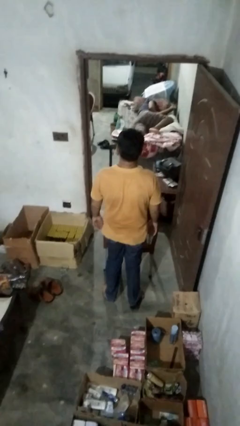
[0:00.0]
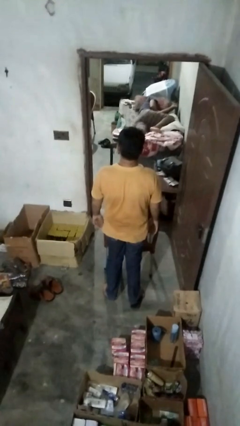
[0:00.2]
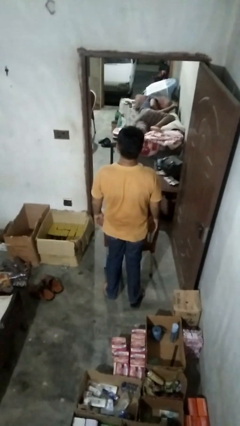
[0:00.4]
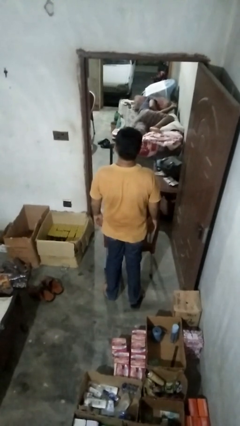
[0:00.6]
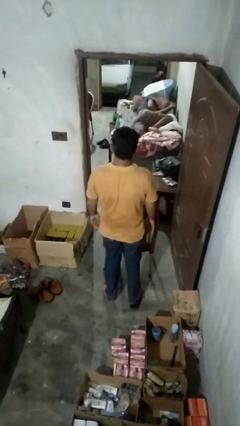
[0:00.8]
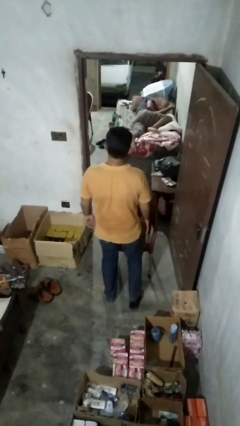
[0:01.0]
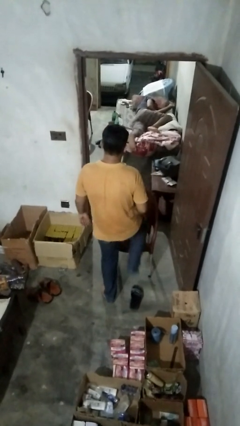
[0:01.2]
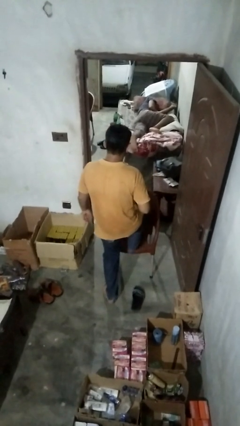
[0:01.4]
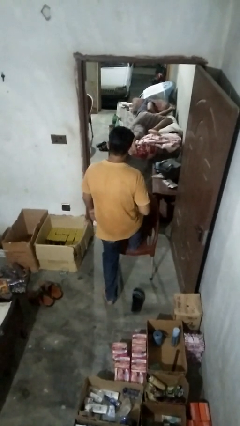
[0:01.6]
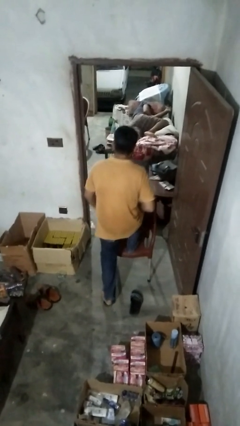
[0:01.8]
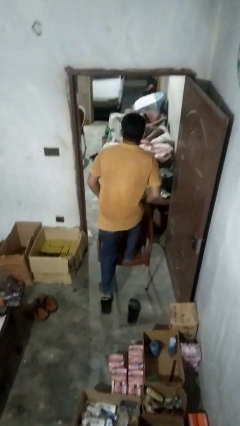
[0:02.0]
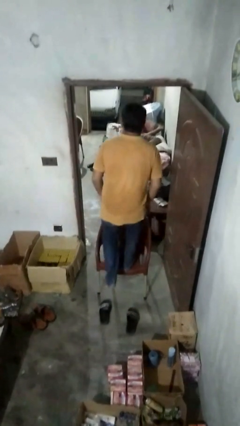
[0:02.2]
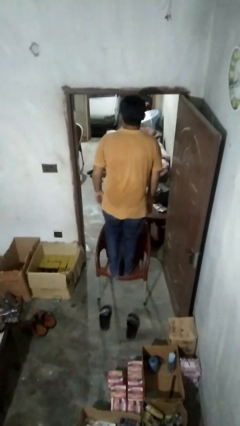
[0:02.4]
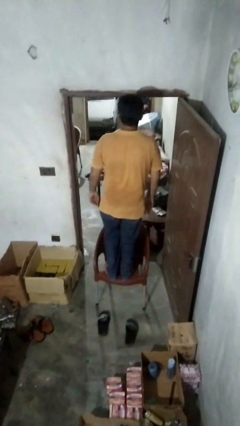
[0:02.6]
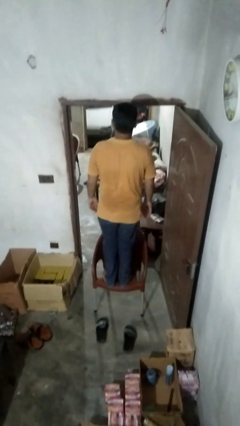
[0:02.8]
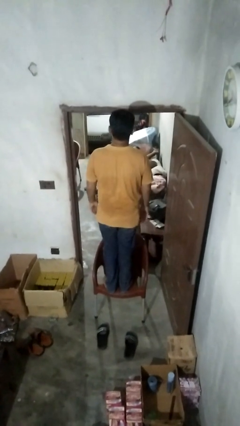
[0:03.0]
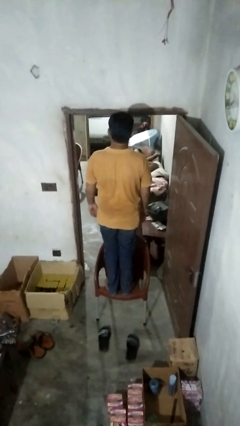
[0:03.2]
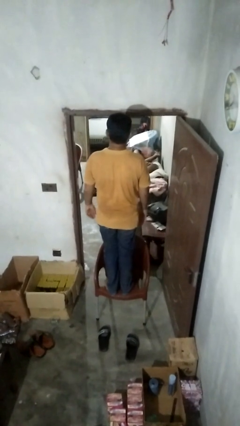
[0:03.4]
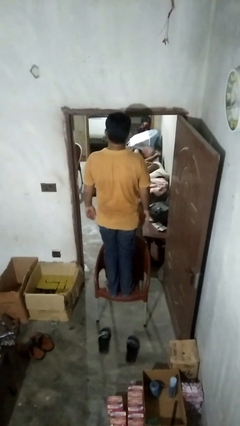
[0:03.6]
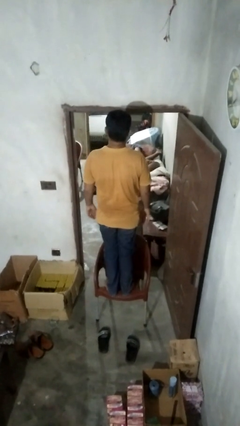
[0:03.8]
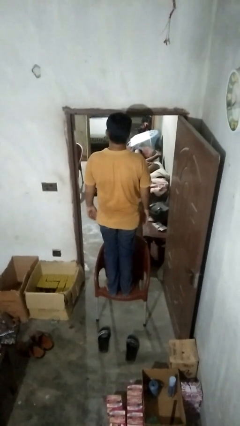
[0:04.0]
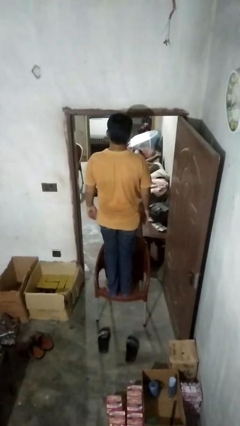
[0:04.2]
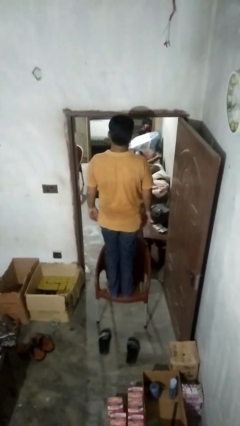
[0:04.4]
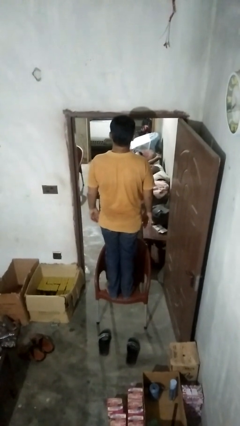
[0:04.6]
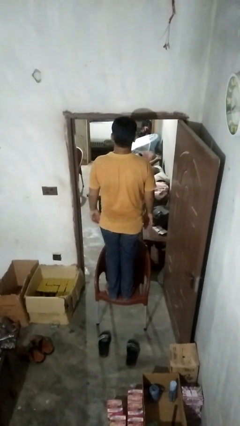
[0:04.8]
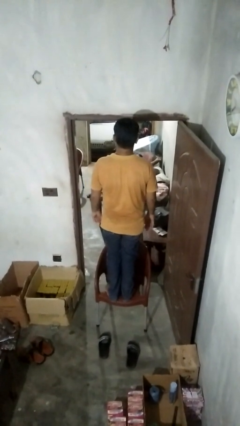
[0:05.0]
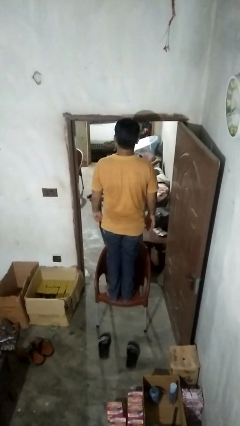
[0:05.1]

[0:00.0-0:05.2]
person climbs on chair

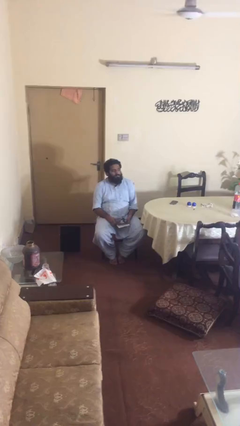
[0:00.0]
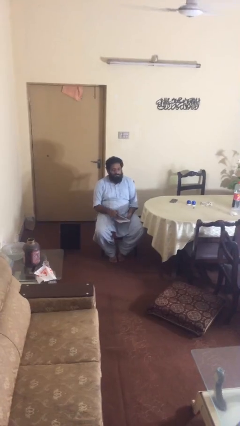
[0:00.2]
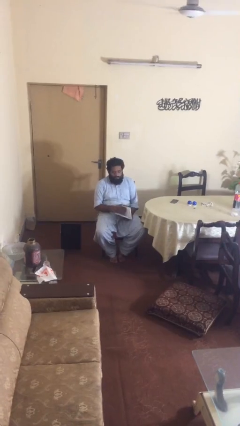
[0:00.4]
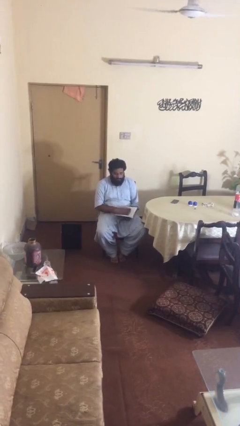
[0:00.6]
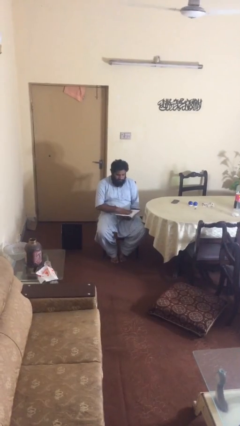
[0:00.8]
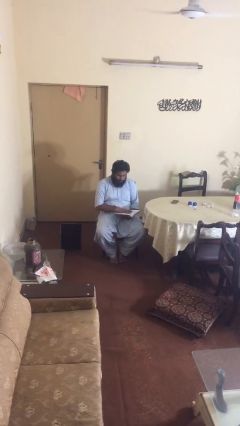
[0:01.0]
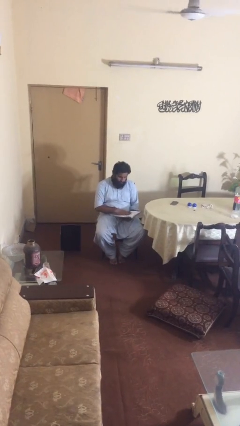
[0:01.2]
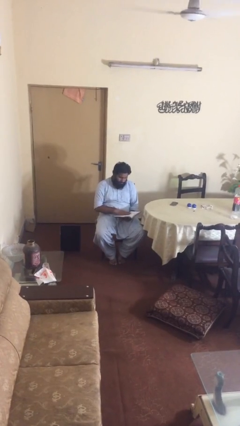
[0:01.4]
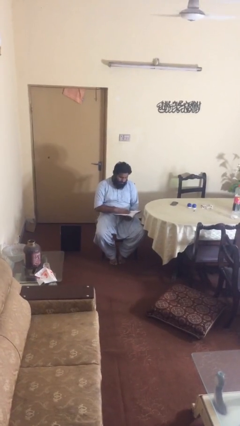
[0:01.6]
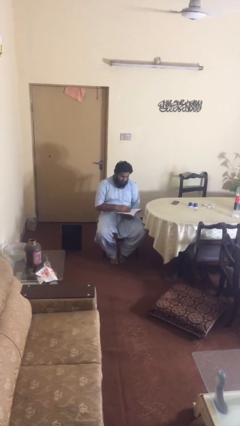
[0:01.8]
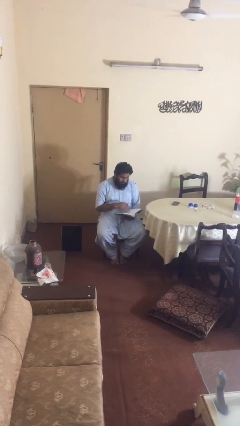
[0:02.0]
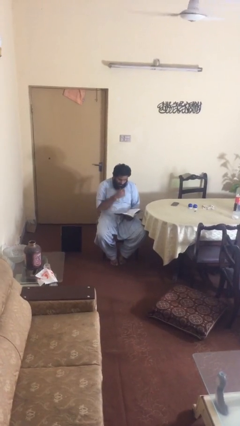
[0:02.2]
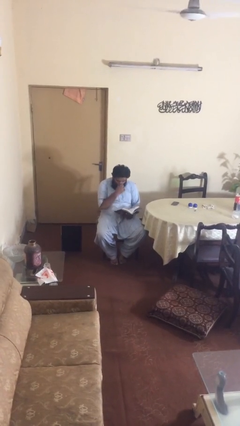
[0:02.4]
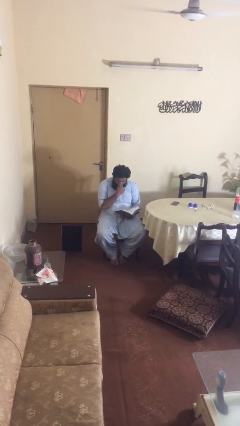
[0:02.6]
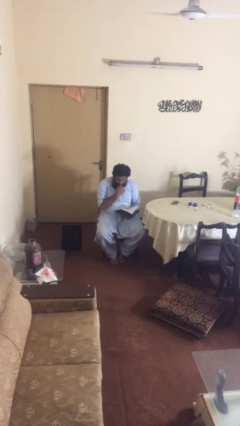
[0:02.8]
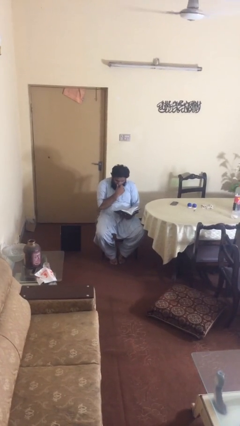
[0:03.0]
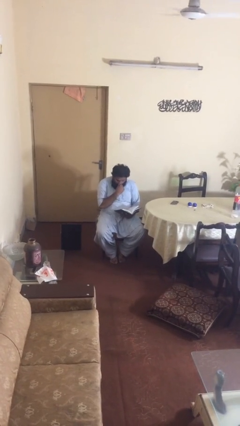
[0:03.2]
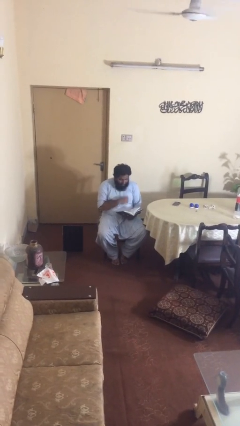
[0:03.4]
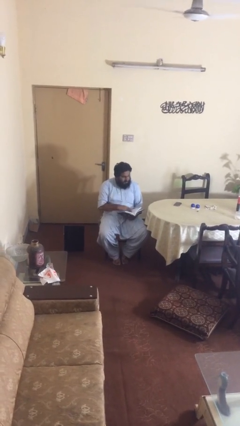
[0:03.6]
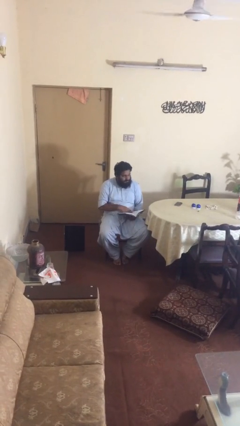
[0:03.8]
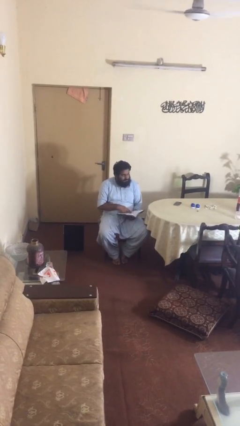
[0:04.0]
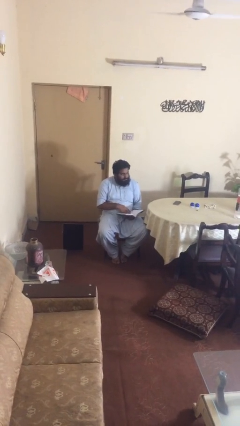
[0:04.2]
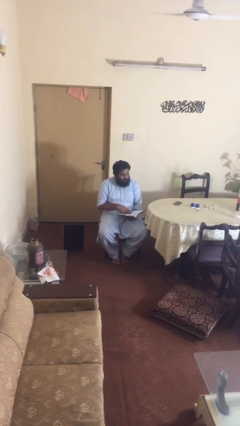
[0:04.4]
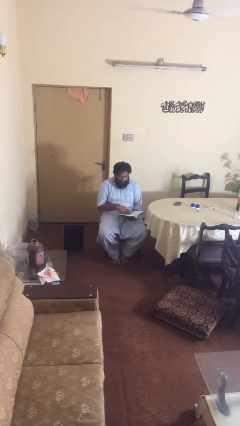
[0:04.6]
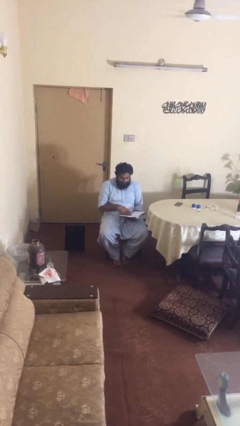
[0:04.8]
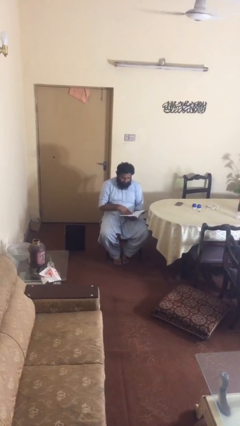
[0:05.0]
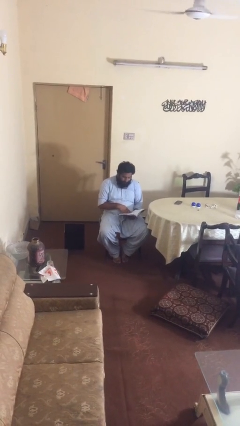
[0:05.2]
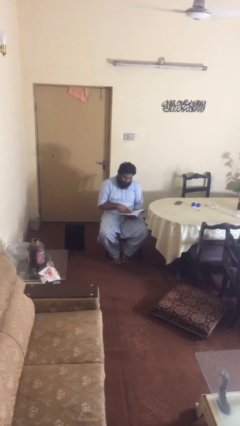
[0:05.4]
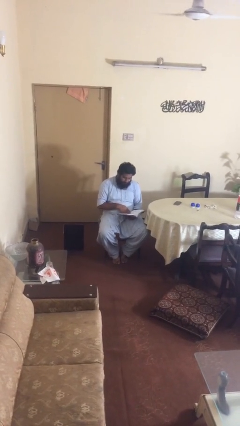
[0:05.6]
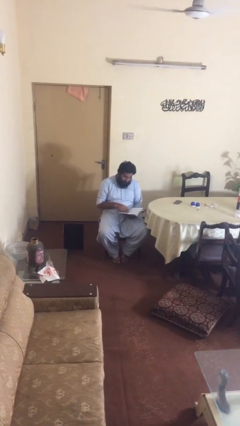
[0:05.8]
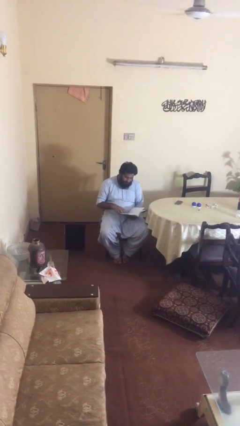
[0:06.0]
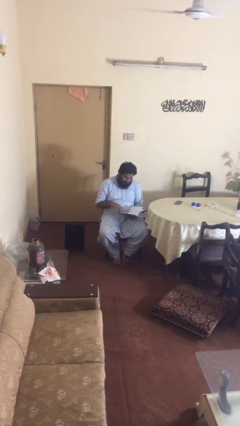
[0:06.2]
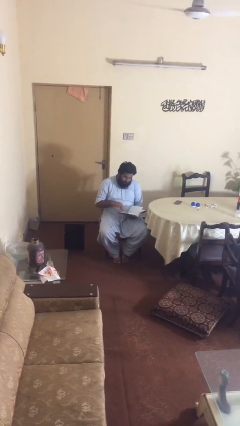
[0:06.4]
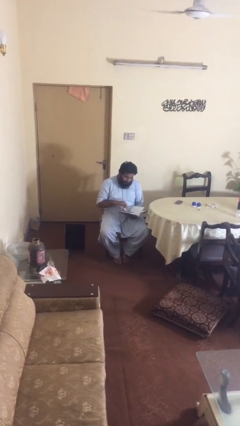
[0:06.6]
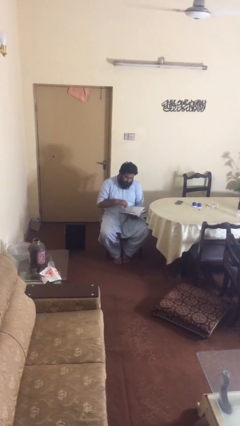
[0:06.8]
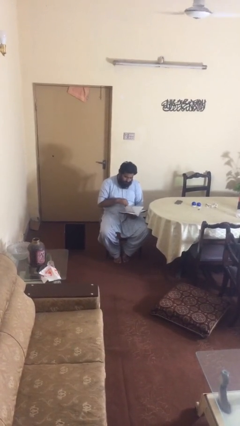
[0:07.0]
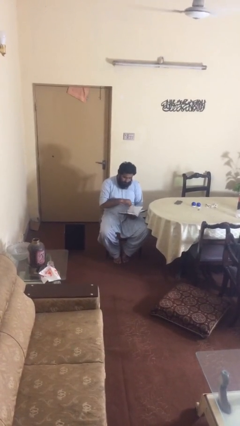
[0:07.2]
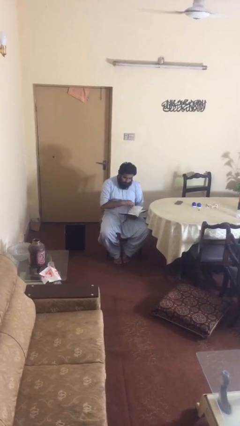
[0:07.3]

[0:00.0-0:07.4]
person reads document

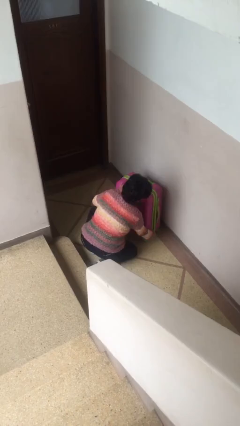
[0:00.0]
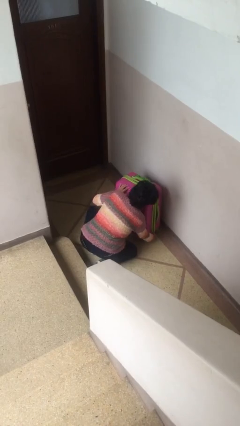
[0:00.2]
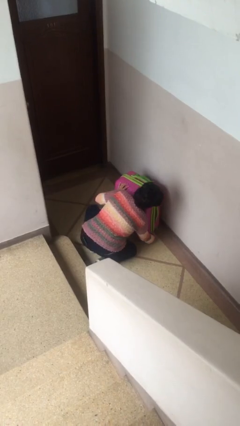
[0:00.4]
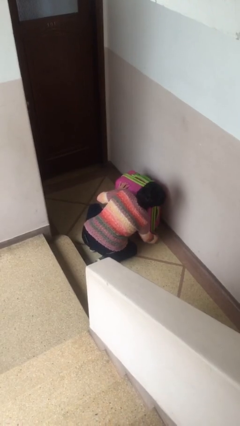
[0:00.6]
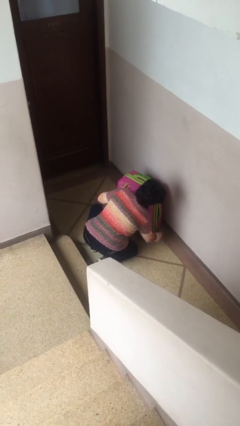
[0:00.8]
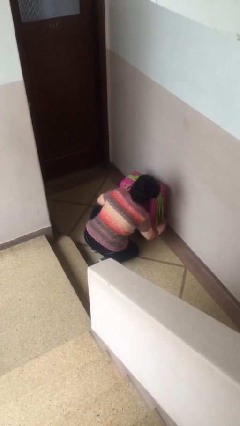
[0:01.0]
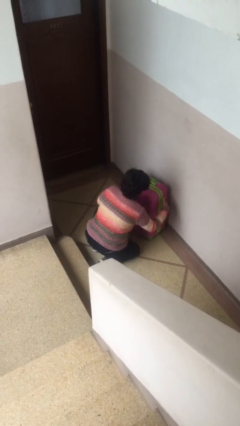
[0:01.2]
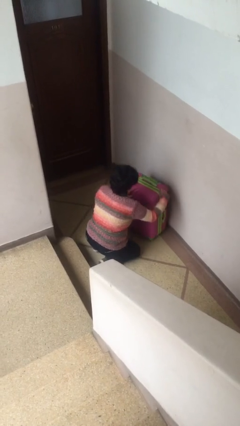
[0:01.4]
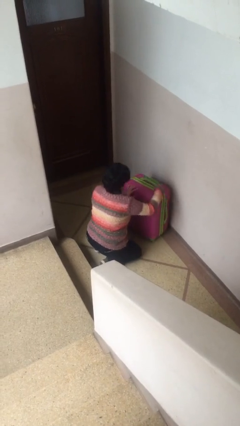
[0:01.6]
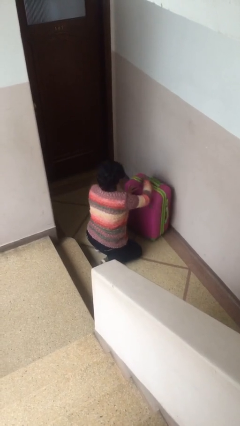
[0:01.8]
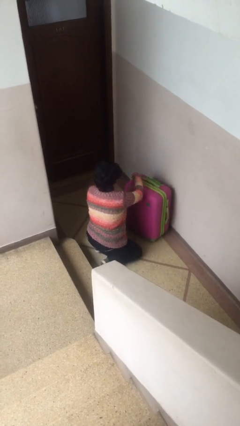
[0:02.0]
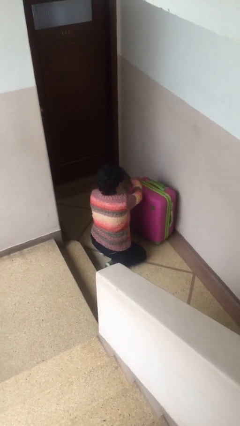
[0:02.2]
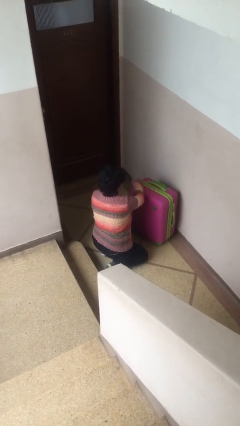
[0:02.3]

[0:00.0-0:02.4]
person closes suitcase

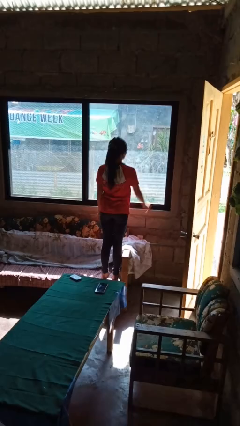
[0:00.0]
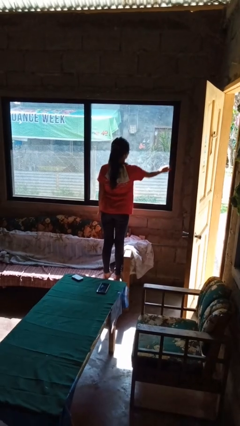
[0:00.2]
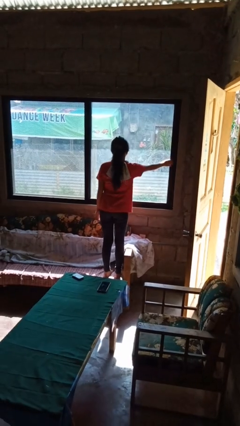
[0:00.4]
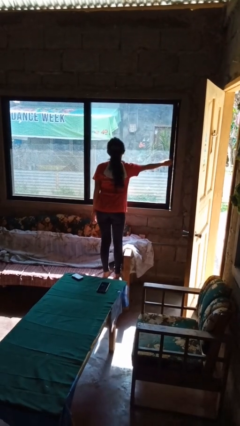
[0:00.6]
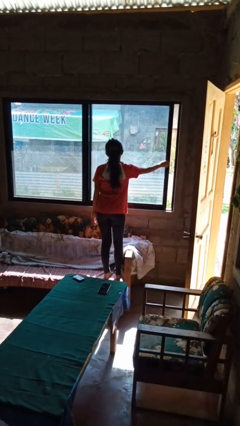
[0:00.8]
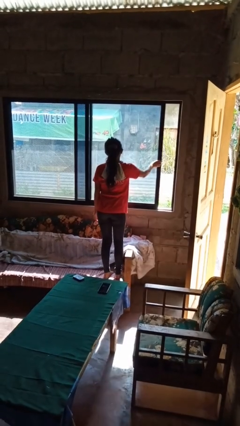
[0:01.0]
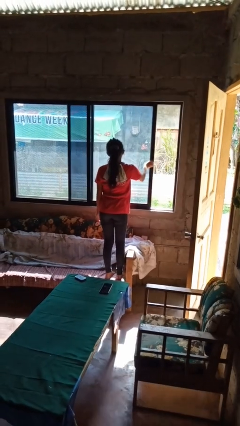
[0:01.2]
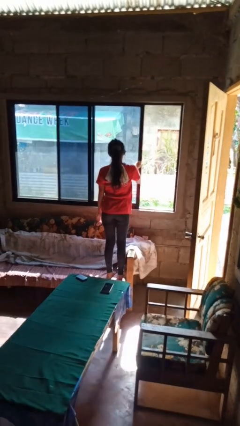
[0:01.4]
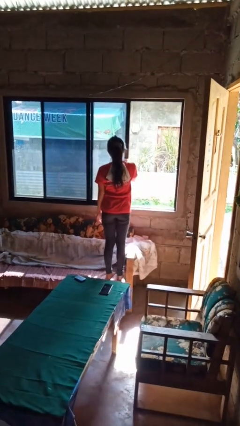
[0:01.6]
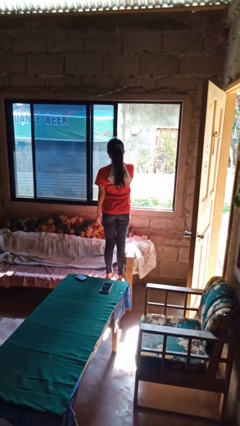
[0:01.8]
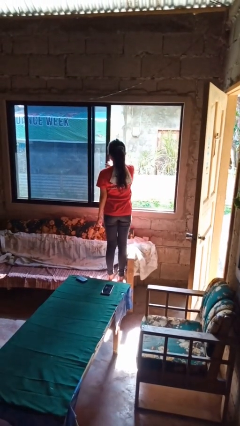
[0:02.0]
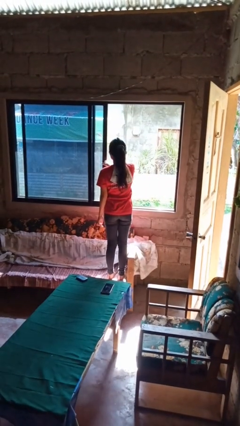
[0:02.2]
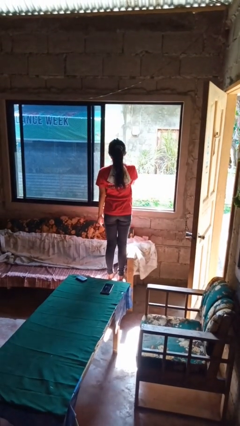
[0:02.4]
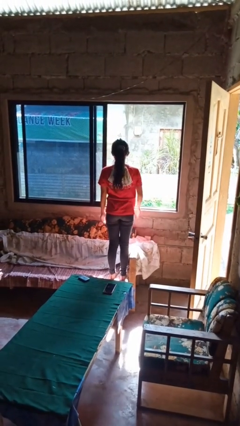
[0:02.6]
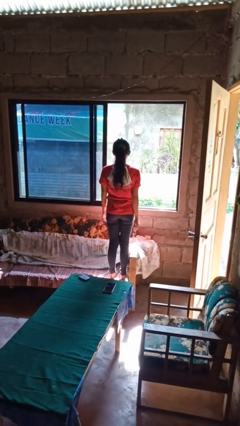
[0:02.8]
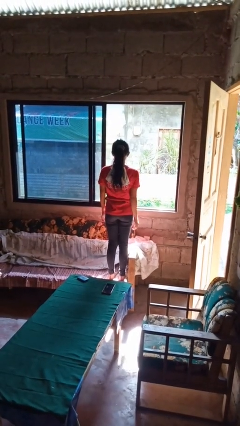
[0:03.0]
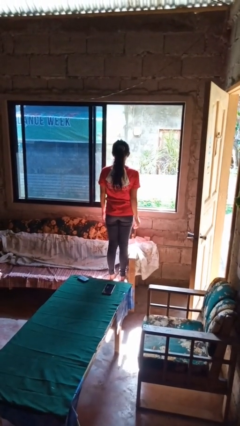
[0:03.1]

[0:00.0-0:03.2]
person opens home window
